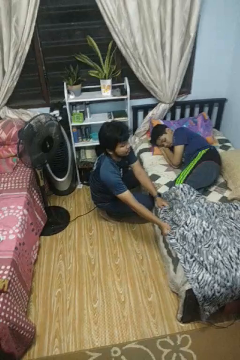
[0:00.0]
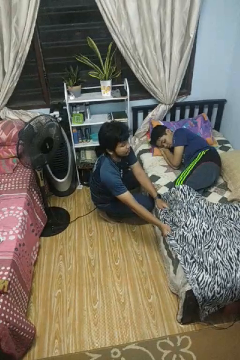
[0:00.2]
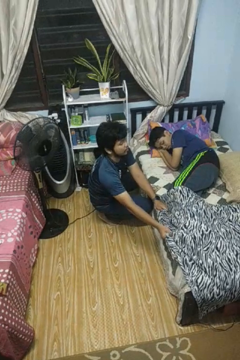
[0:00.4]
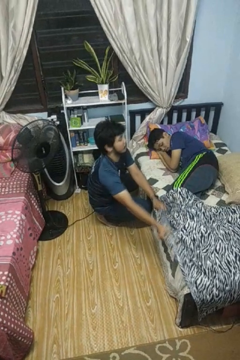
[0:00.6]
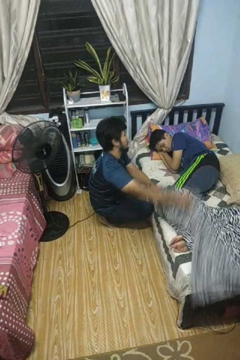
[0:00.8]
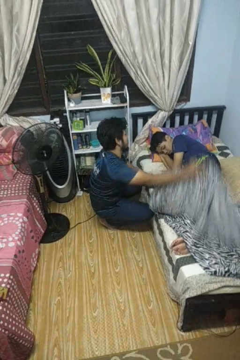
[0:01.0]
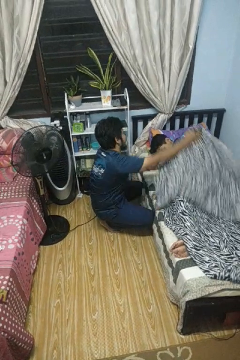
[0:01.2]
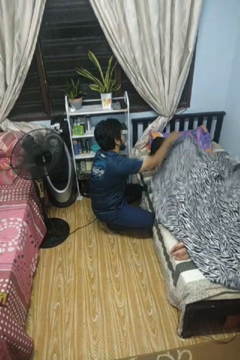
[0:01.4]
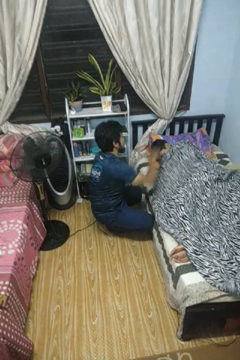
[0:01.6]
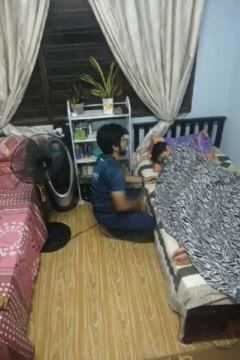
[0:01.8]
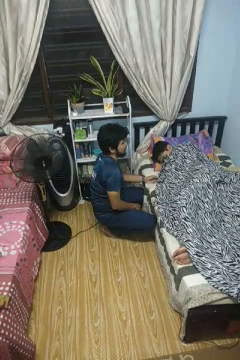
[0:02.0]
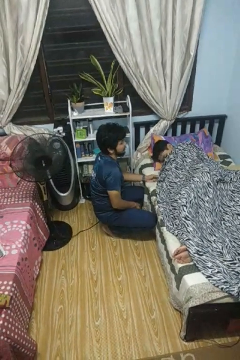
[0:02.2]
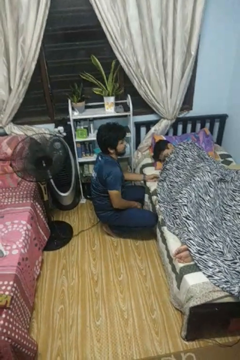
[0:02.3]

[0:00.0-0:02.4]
person covers friend with blanket

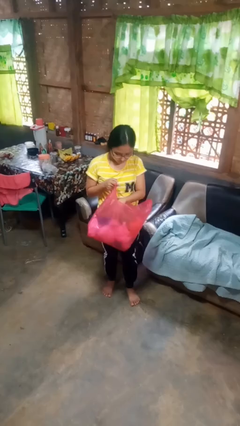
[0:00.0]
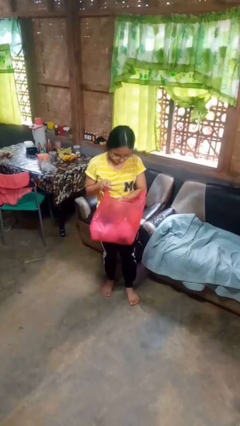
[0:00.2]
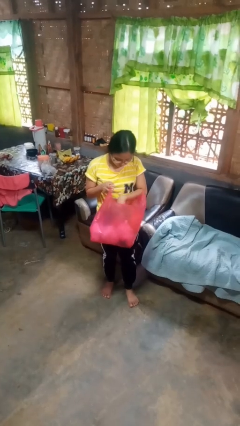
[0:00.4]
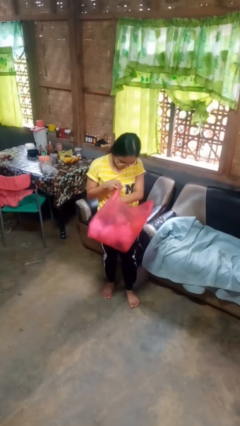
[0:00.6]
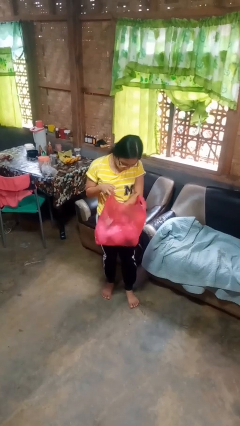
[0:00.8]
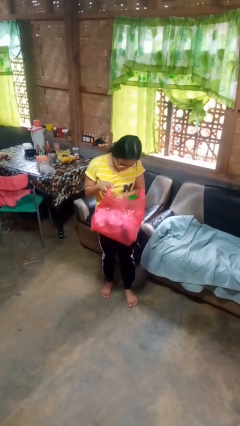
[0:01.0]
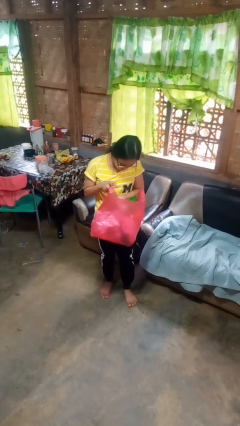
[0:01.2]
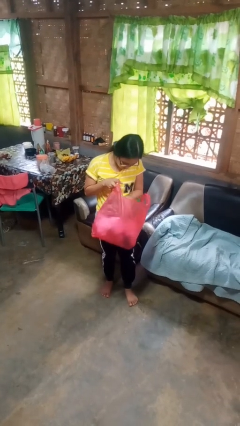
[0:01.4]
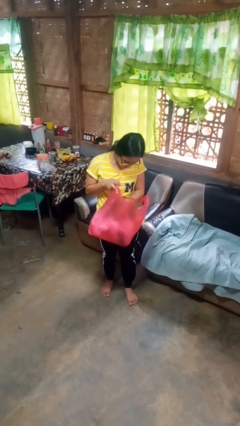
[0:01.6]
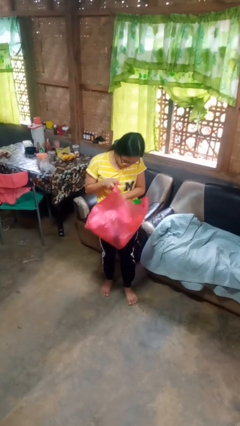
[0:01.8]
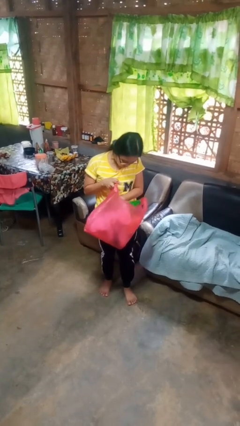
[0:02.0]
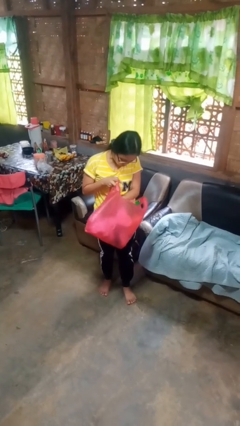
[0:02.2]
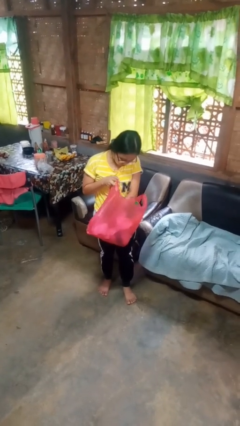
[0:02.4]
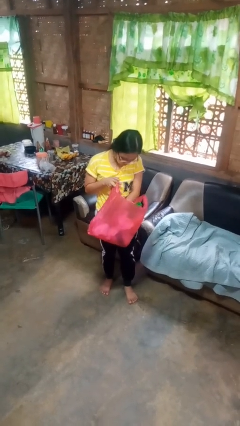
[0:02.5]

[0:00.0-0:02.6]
person searches in bag

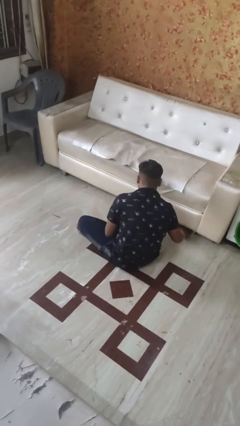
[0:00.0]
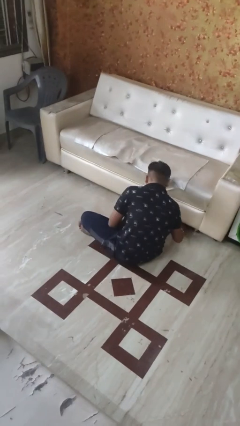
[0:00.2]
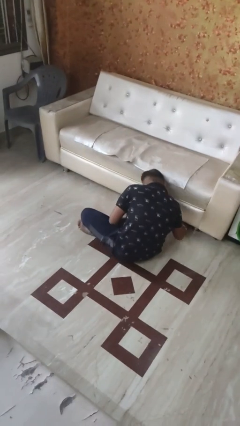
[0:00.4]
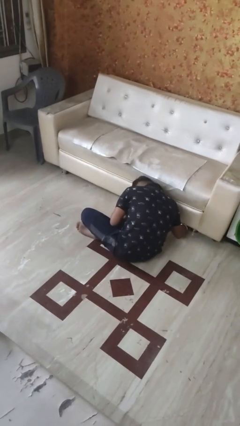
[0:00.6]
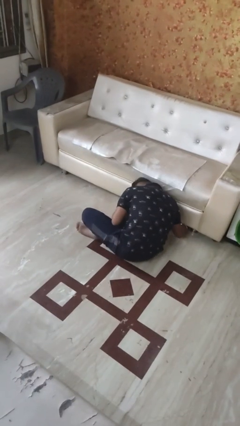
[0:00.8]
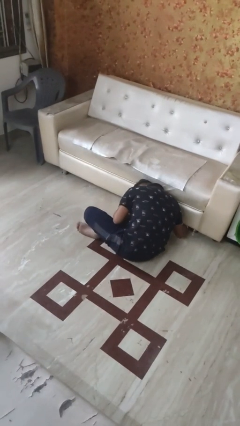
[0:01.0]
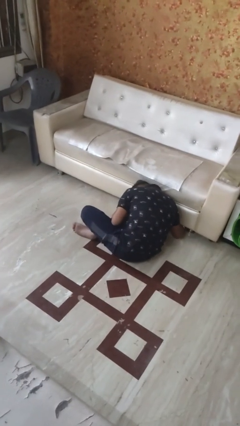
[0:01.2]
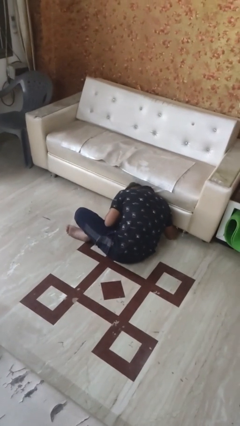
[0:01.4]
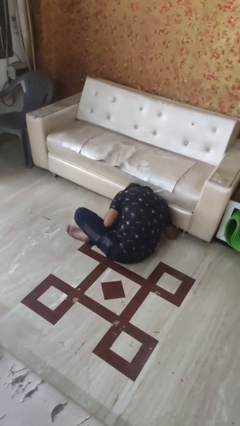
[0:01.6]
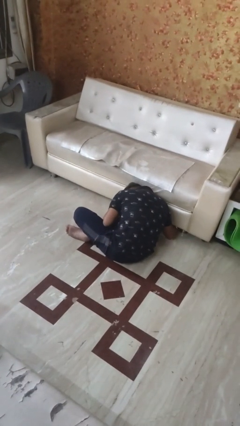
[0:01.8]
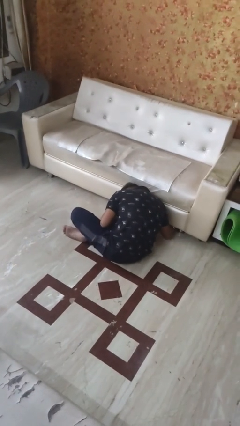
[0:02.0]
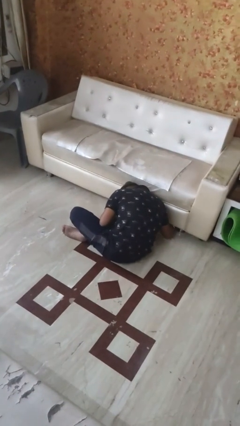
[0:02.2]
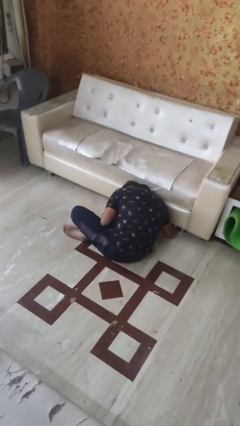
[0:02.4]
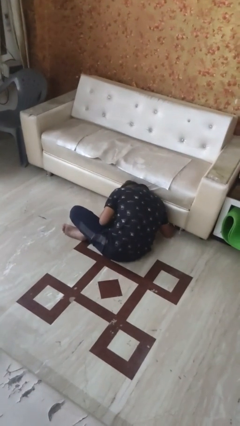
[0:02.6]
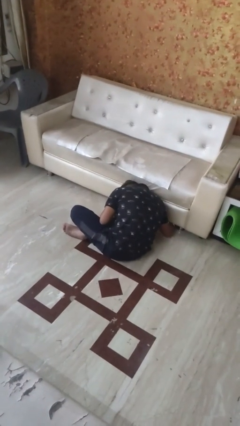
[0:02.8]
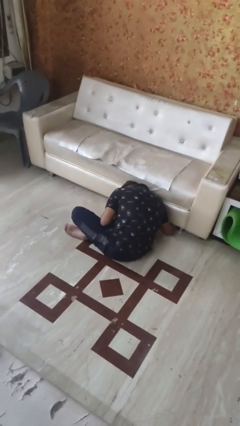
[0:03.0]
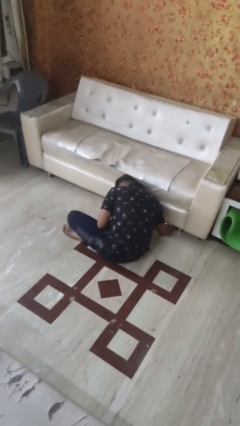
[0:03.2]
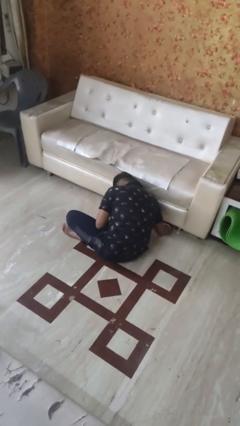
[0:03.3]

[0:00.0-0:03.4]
person searches under bed

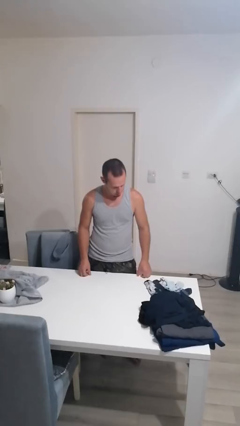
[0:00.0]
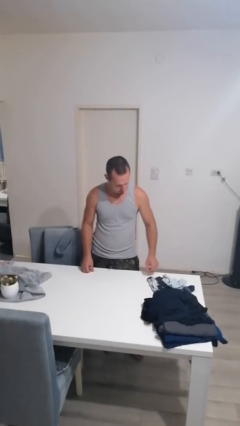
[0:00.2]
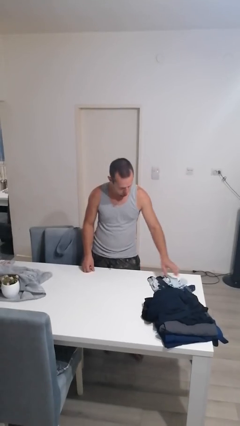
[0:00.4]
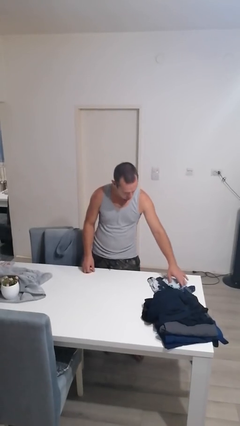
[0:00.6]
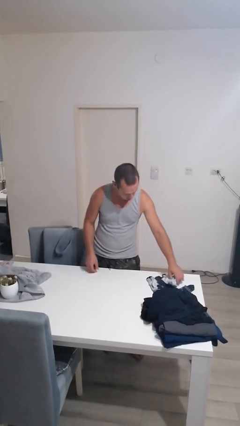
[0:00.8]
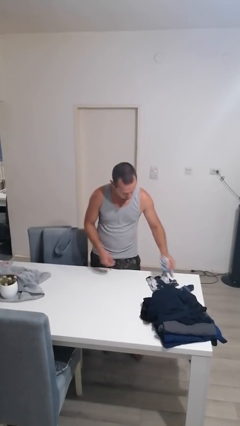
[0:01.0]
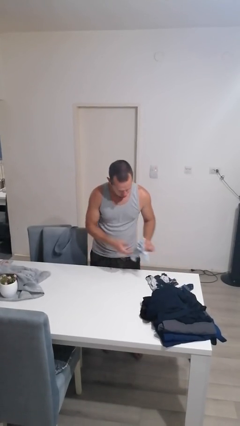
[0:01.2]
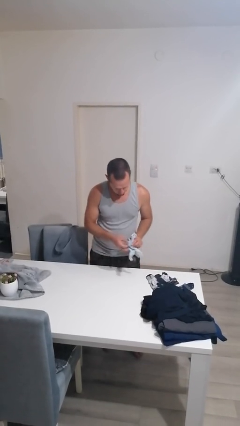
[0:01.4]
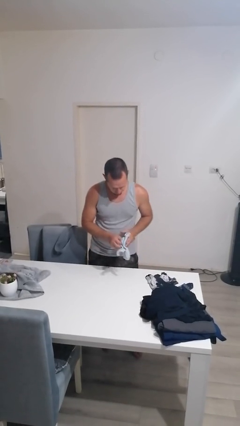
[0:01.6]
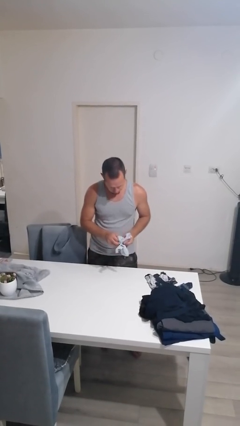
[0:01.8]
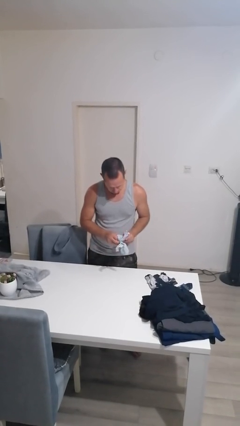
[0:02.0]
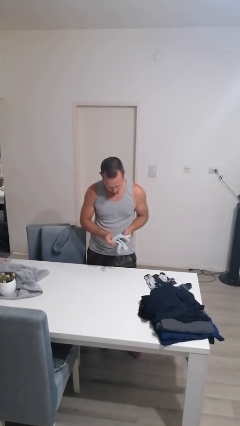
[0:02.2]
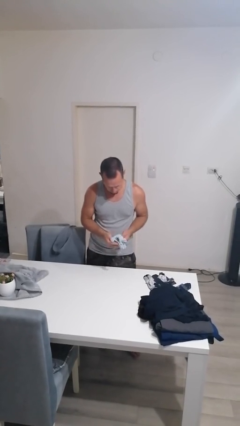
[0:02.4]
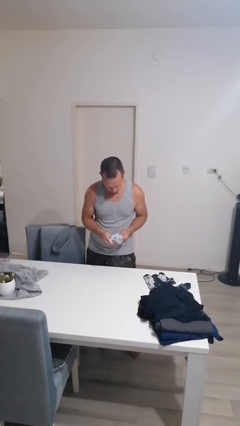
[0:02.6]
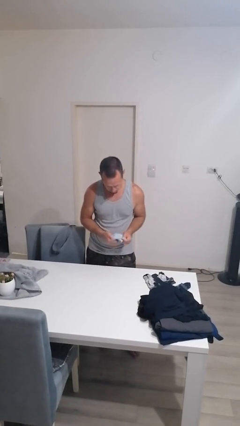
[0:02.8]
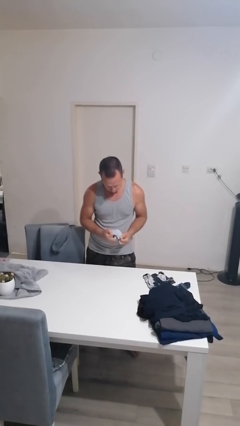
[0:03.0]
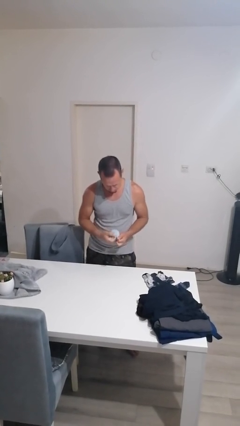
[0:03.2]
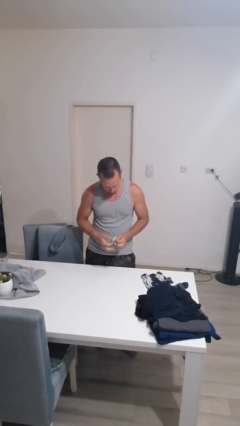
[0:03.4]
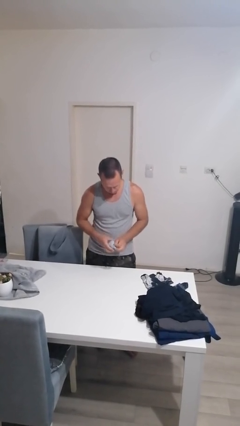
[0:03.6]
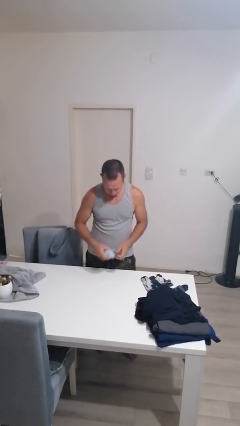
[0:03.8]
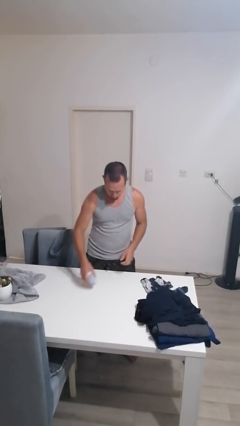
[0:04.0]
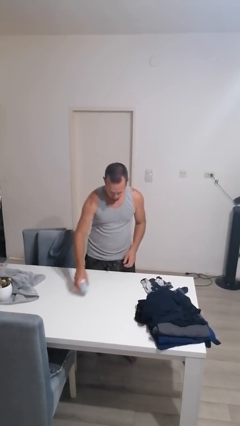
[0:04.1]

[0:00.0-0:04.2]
person folds socks

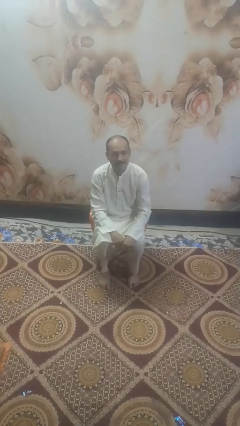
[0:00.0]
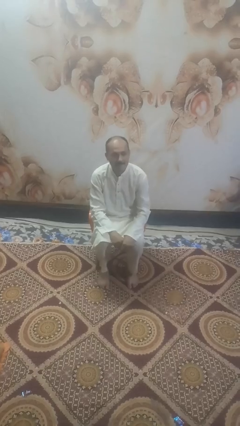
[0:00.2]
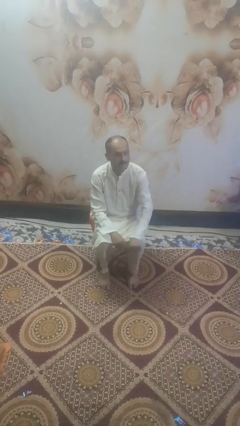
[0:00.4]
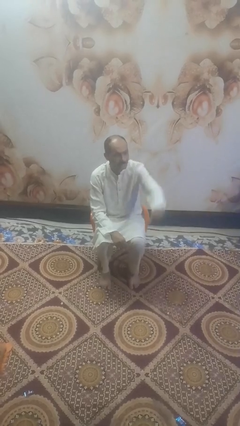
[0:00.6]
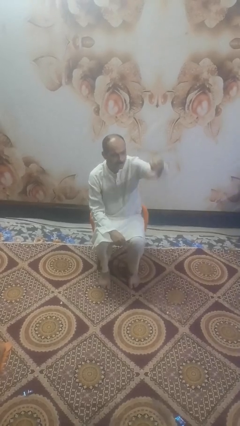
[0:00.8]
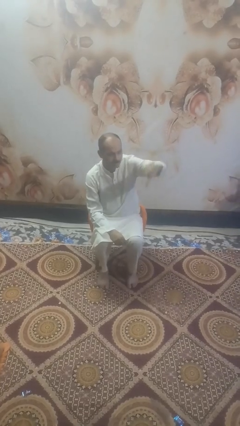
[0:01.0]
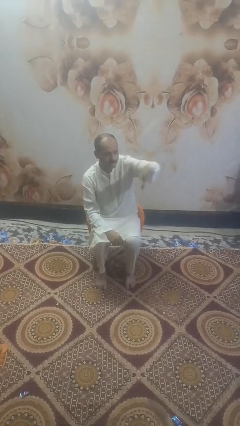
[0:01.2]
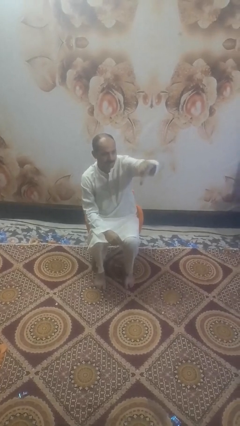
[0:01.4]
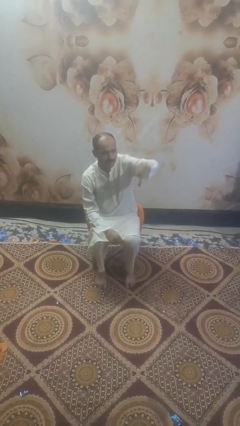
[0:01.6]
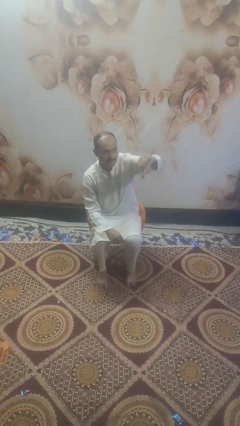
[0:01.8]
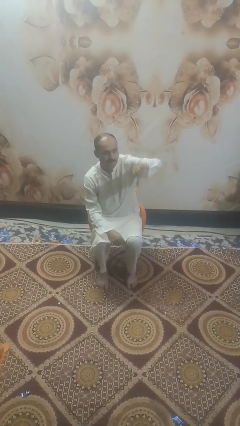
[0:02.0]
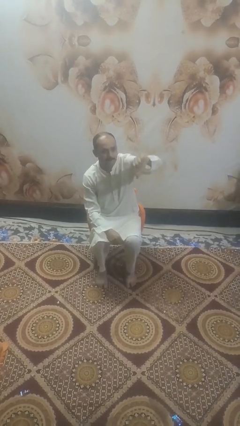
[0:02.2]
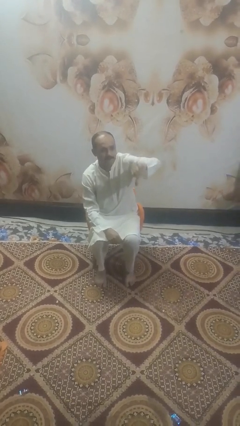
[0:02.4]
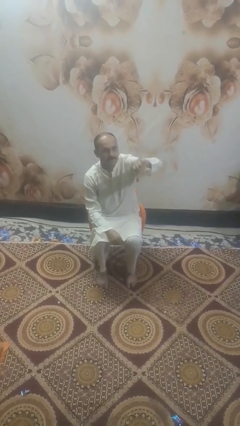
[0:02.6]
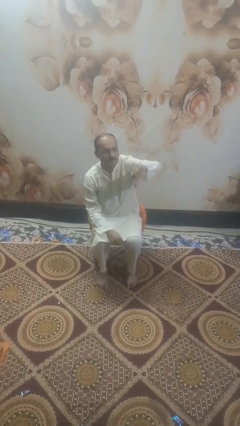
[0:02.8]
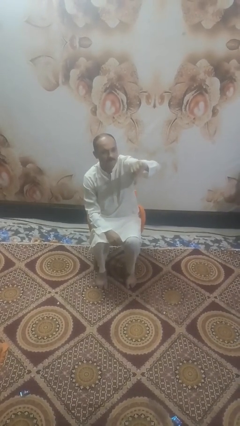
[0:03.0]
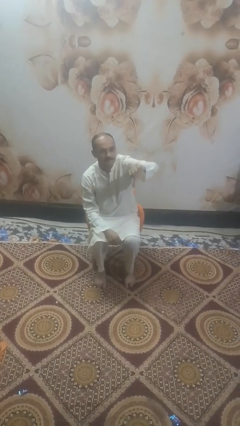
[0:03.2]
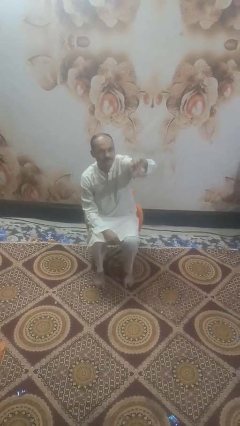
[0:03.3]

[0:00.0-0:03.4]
person gestures thumbs down

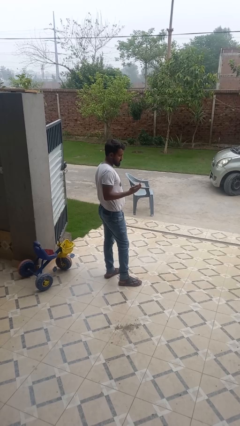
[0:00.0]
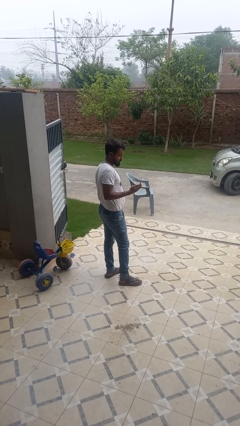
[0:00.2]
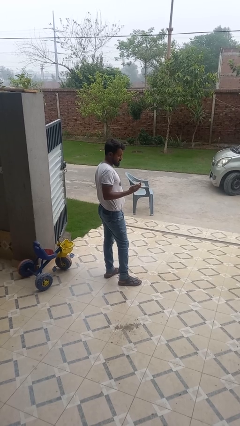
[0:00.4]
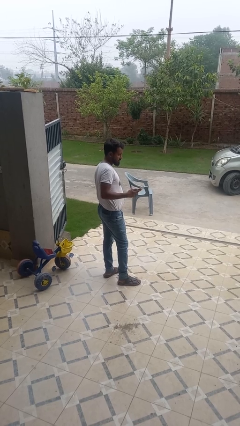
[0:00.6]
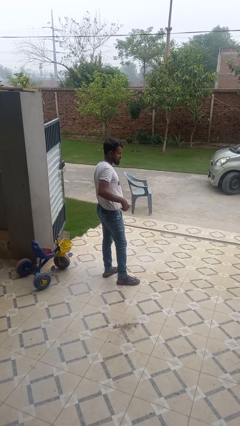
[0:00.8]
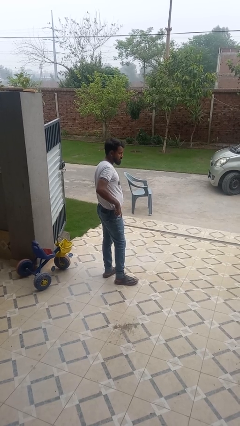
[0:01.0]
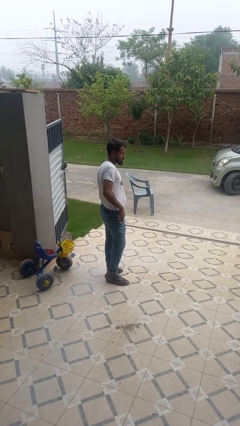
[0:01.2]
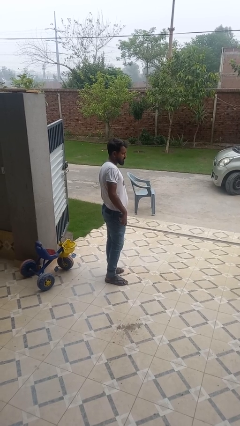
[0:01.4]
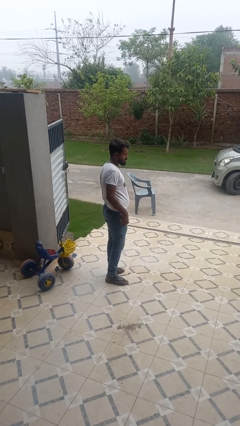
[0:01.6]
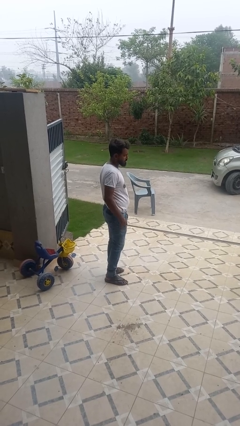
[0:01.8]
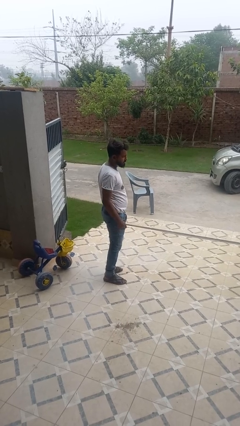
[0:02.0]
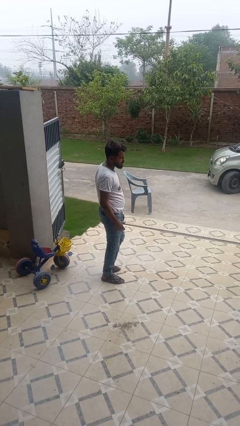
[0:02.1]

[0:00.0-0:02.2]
person puts phone into pocket
